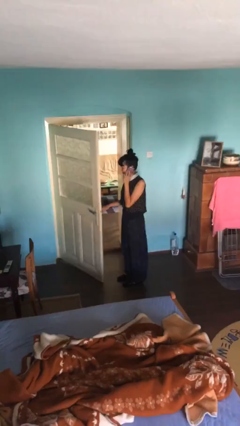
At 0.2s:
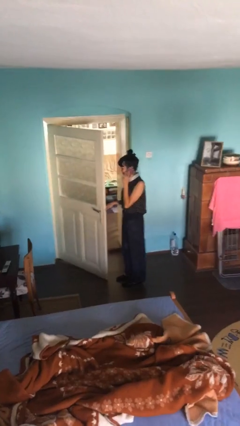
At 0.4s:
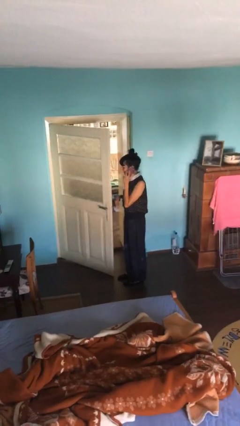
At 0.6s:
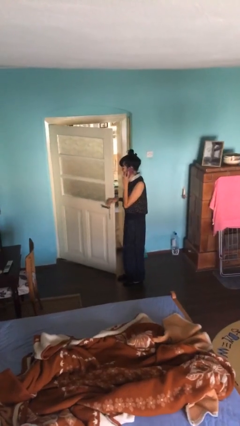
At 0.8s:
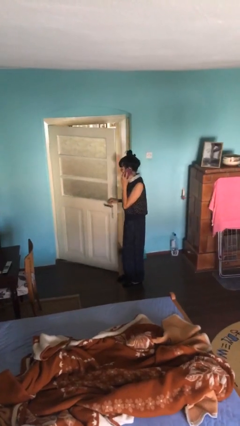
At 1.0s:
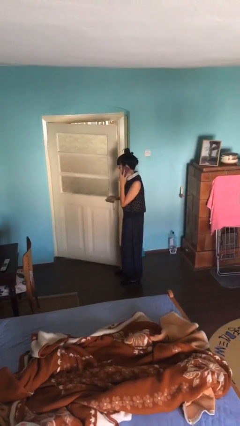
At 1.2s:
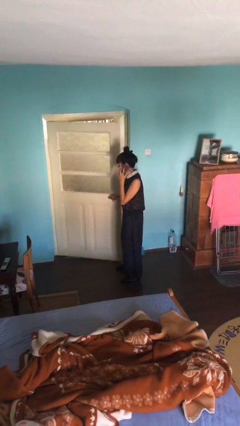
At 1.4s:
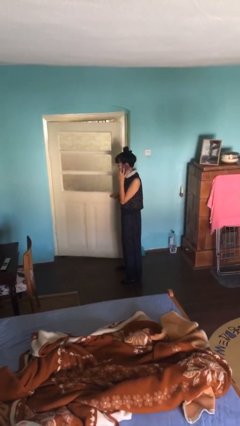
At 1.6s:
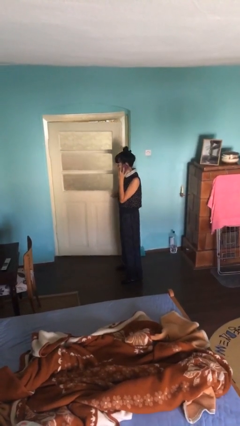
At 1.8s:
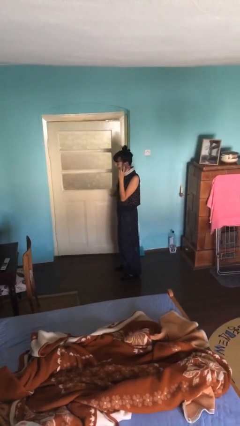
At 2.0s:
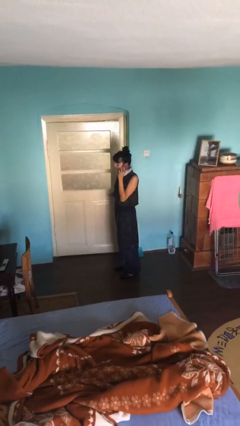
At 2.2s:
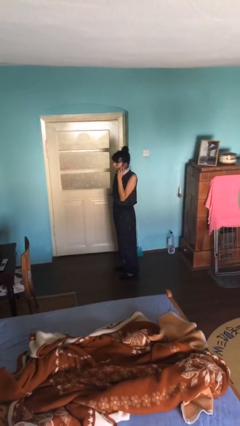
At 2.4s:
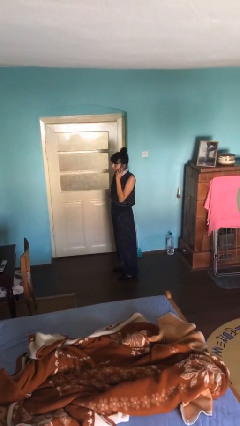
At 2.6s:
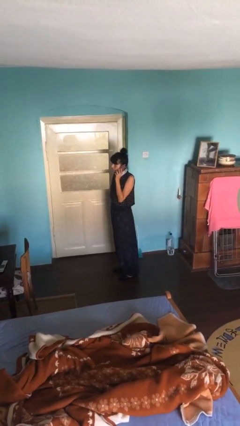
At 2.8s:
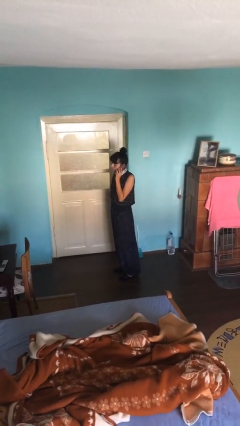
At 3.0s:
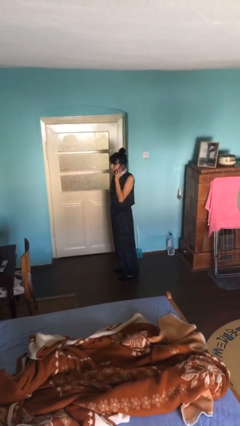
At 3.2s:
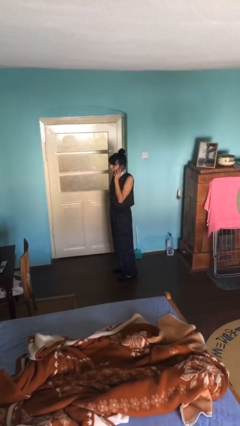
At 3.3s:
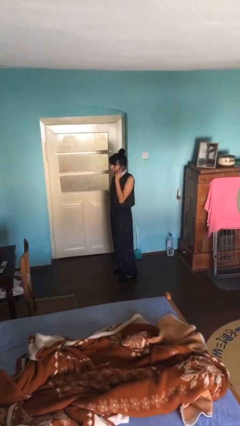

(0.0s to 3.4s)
person closes facility door

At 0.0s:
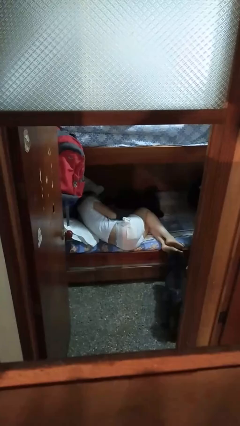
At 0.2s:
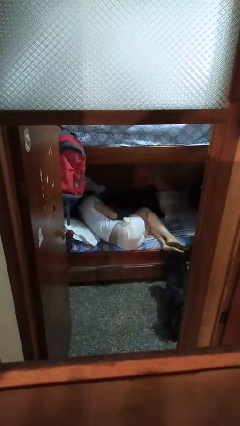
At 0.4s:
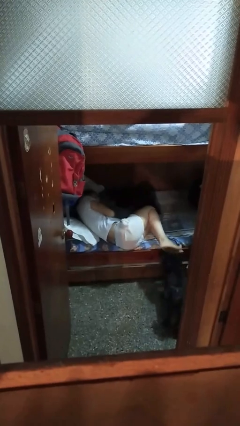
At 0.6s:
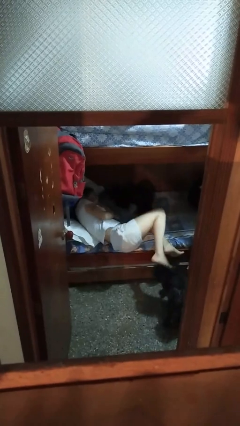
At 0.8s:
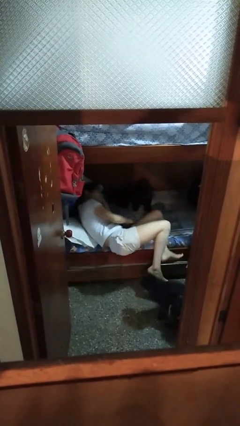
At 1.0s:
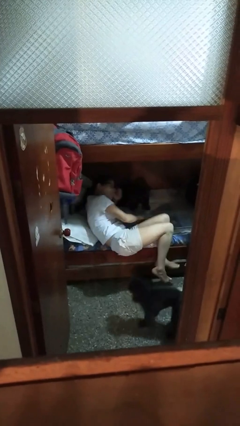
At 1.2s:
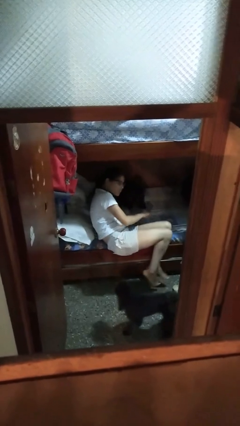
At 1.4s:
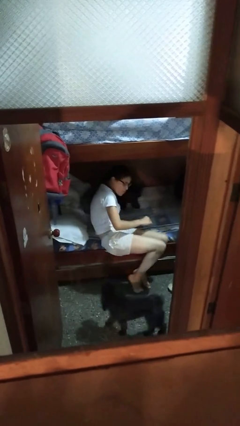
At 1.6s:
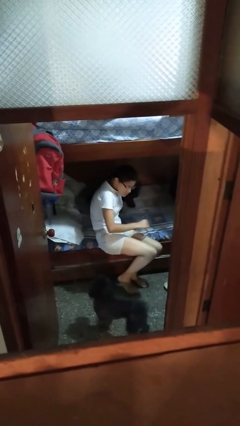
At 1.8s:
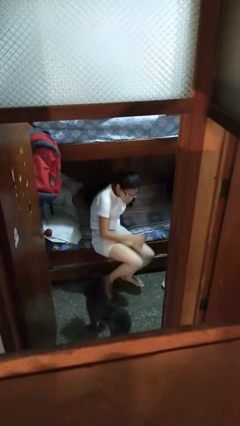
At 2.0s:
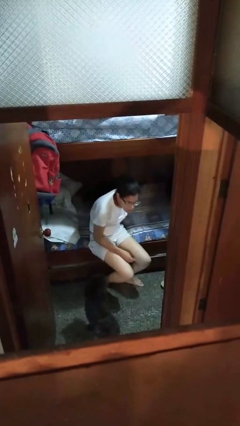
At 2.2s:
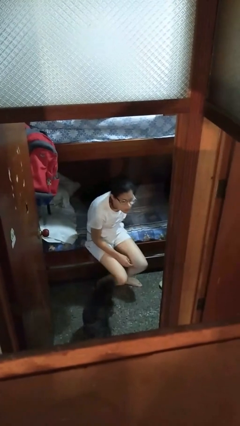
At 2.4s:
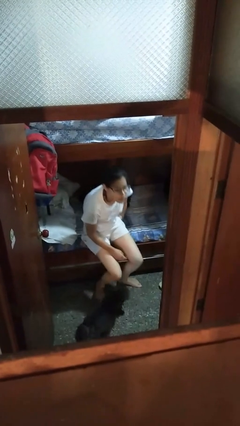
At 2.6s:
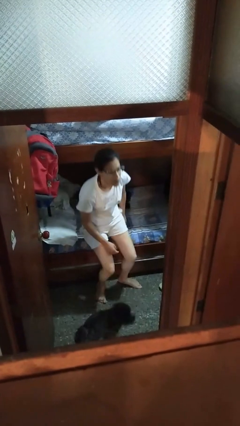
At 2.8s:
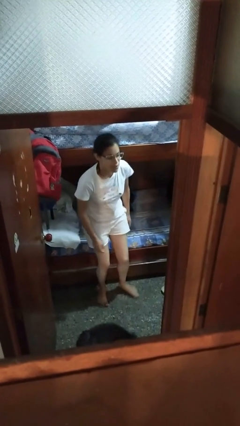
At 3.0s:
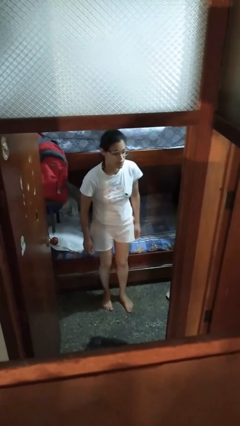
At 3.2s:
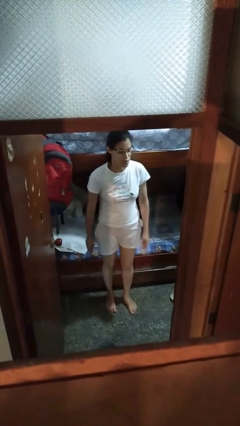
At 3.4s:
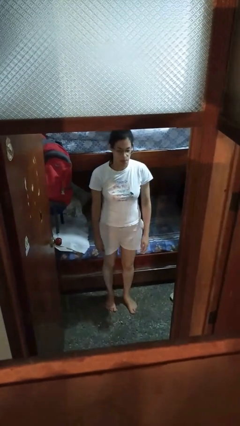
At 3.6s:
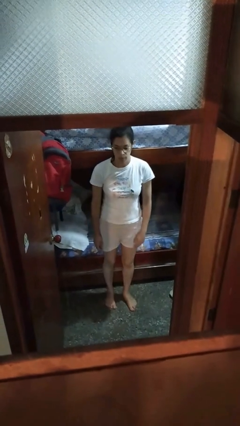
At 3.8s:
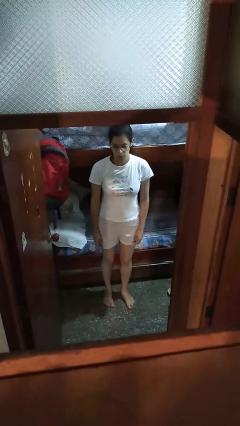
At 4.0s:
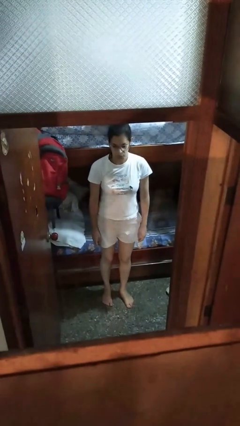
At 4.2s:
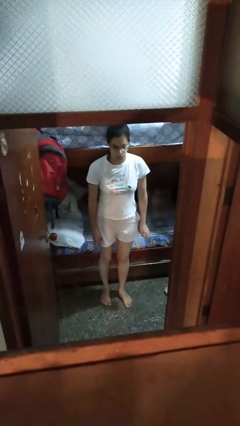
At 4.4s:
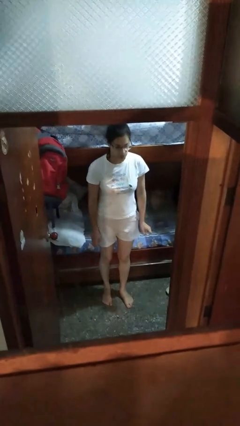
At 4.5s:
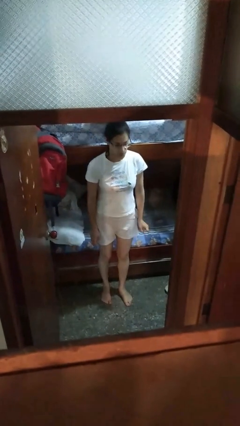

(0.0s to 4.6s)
person stands up

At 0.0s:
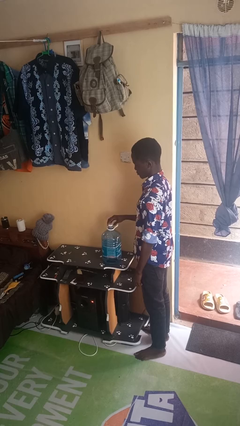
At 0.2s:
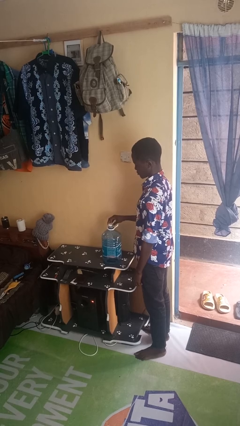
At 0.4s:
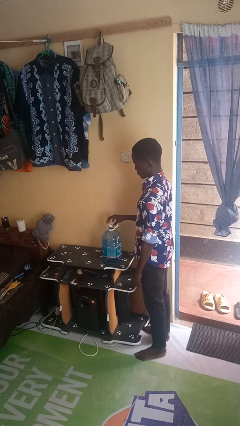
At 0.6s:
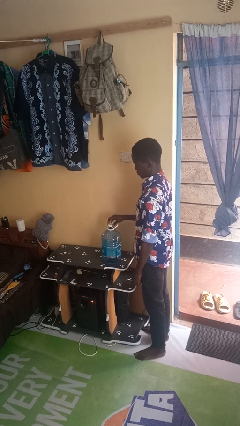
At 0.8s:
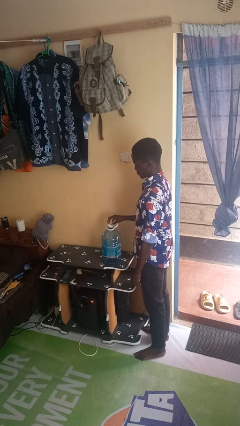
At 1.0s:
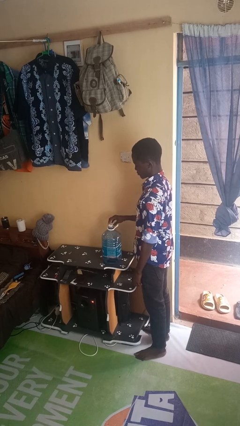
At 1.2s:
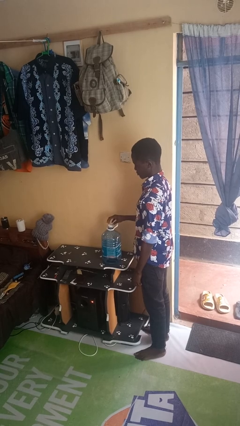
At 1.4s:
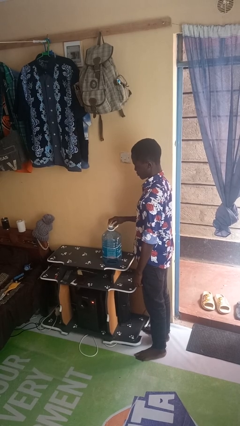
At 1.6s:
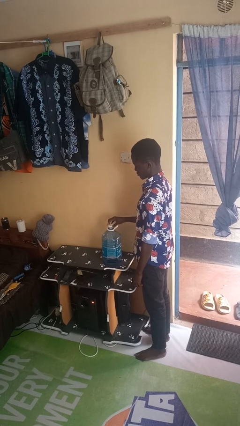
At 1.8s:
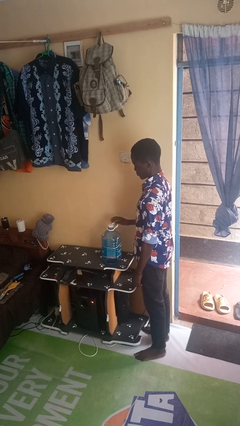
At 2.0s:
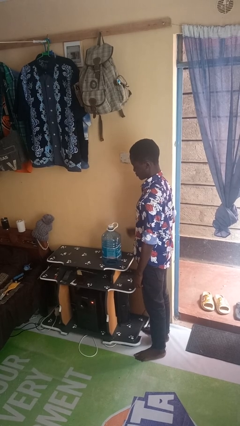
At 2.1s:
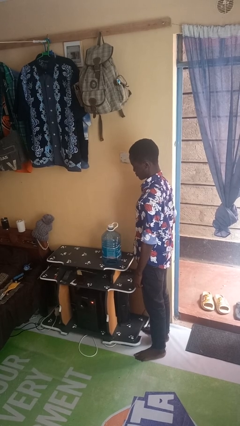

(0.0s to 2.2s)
person screws lid to bottle

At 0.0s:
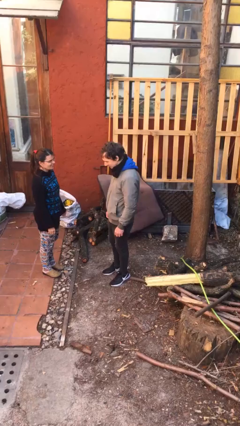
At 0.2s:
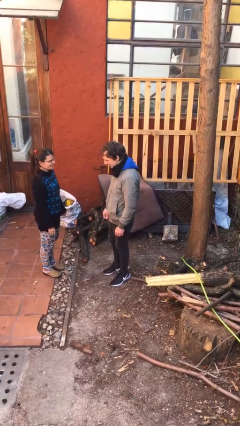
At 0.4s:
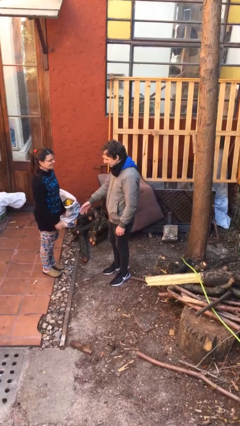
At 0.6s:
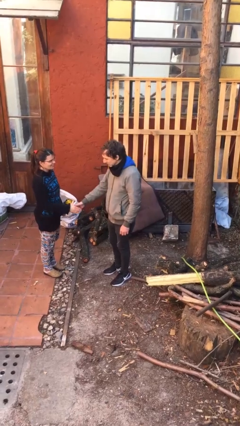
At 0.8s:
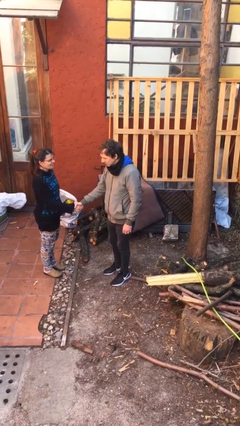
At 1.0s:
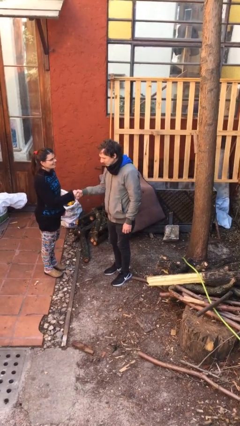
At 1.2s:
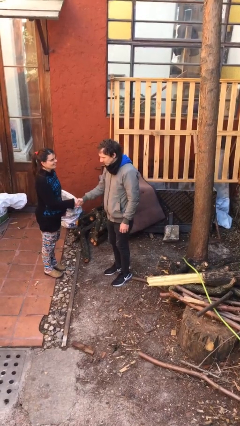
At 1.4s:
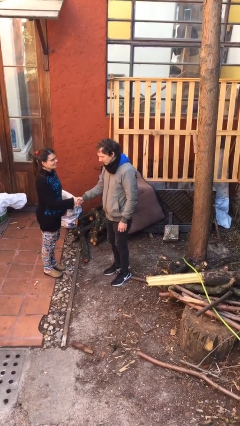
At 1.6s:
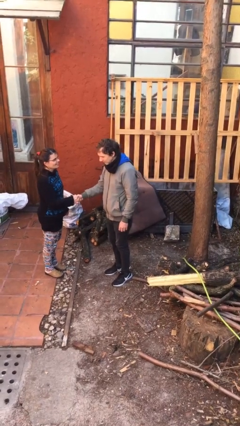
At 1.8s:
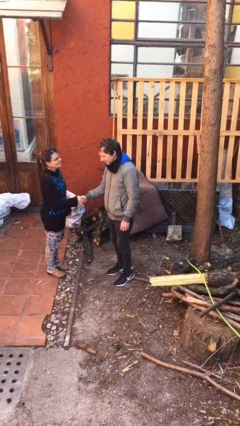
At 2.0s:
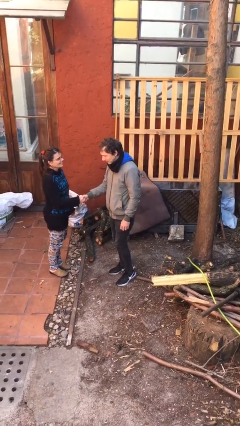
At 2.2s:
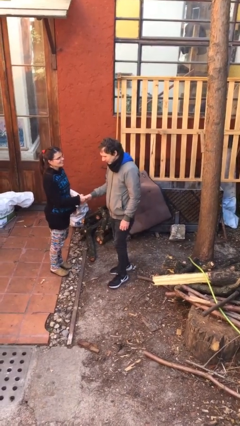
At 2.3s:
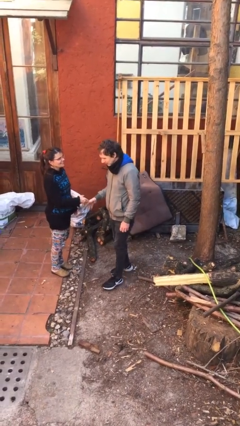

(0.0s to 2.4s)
person shakes hand

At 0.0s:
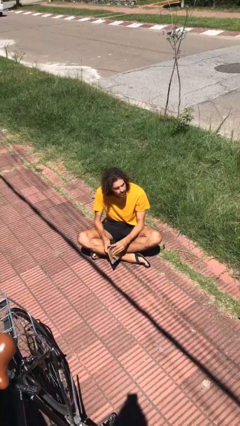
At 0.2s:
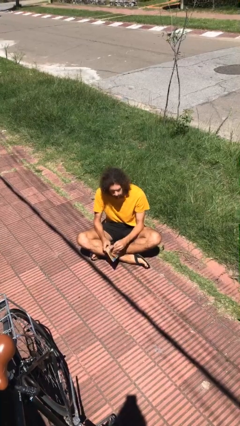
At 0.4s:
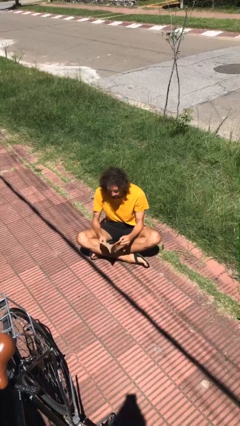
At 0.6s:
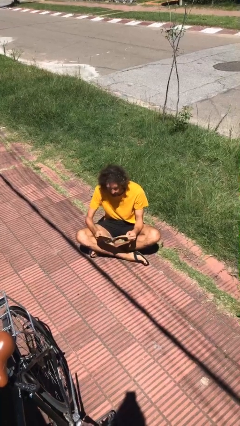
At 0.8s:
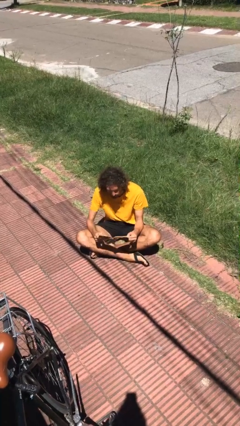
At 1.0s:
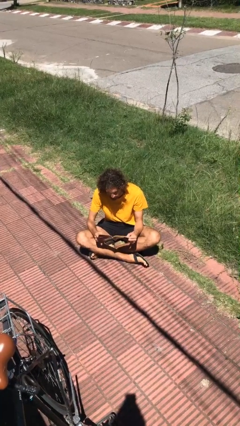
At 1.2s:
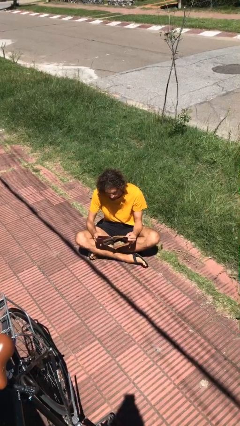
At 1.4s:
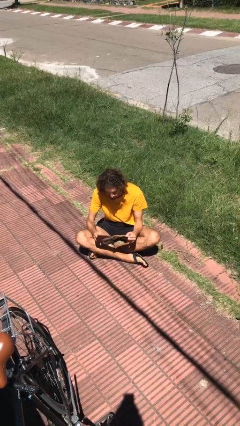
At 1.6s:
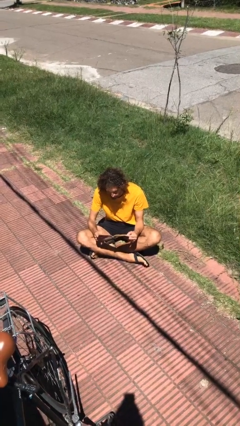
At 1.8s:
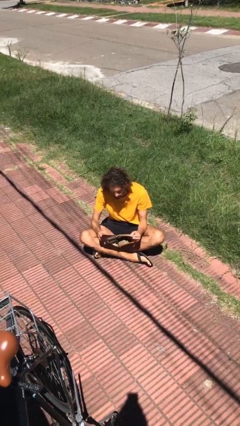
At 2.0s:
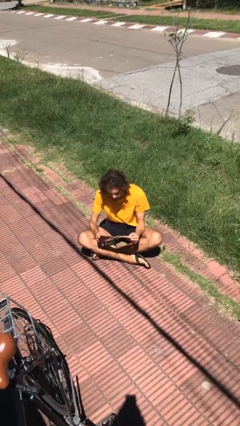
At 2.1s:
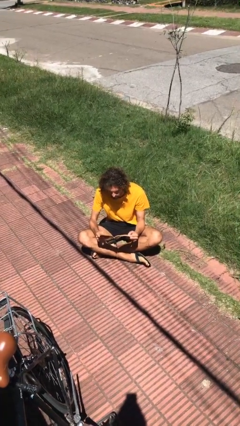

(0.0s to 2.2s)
person reads document

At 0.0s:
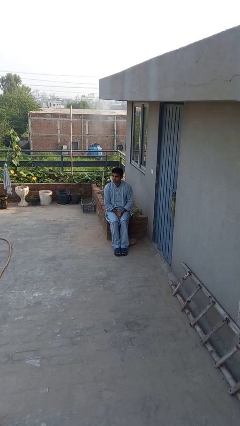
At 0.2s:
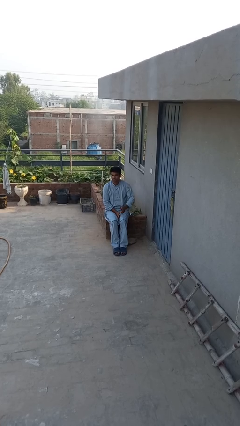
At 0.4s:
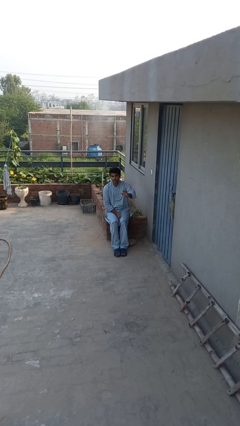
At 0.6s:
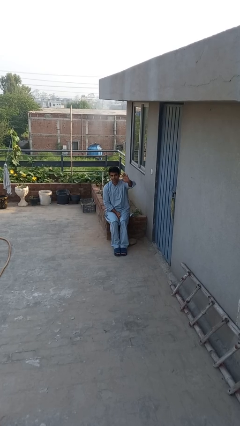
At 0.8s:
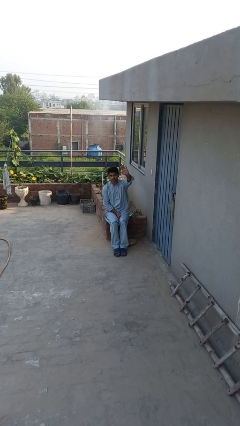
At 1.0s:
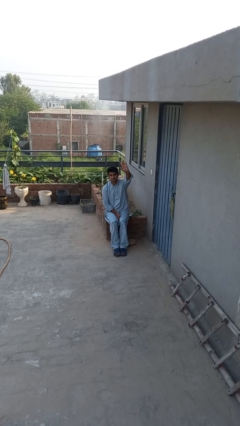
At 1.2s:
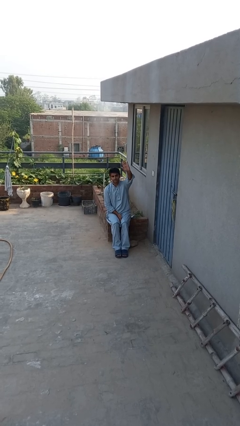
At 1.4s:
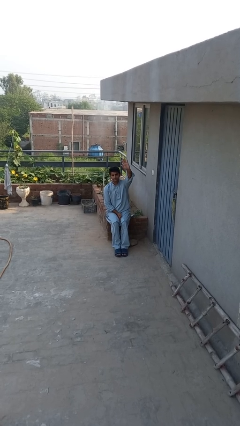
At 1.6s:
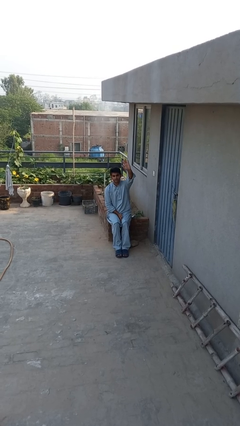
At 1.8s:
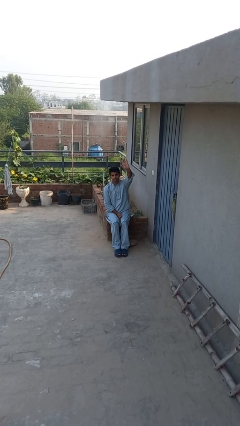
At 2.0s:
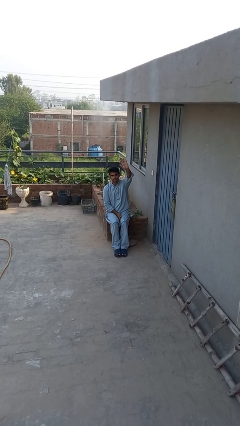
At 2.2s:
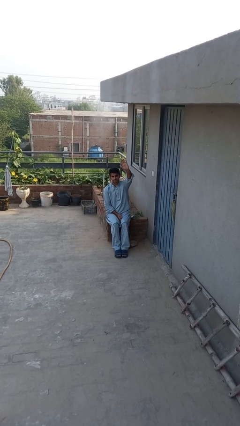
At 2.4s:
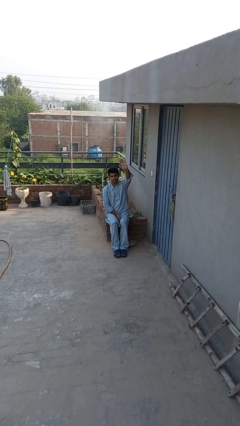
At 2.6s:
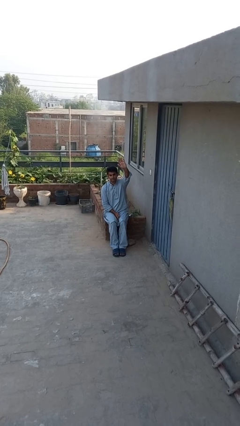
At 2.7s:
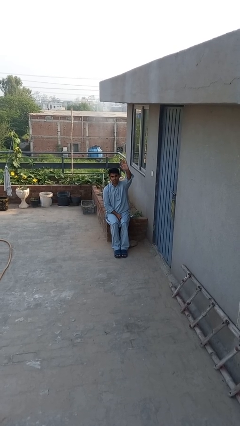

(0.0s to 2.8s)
person gestures raise hand
